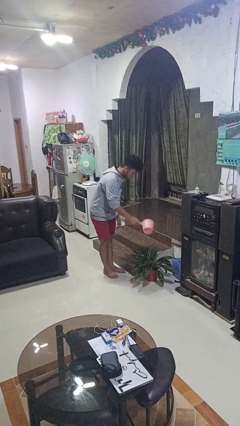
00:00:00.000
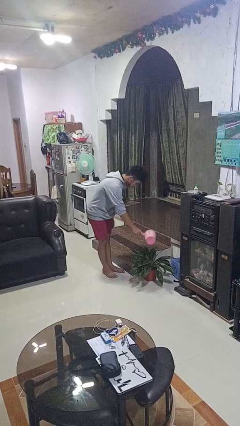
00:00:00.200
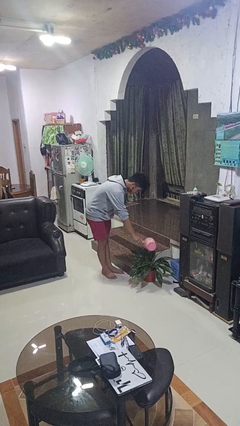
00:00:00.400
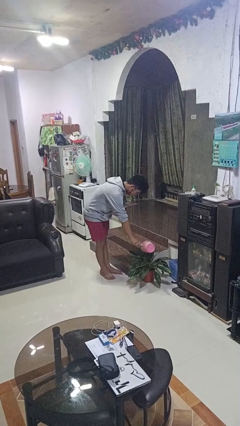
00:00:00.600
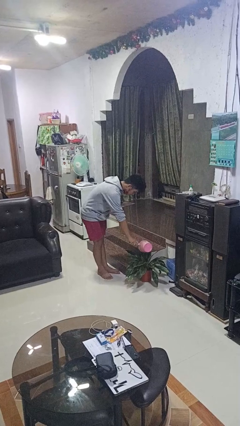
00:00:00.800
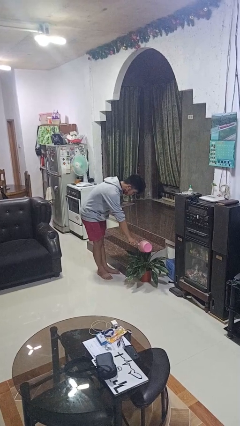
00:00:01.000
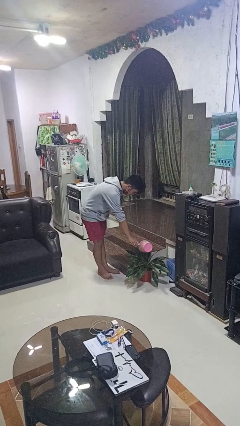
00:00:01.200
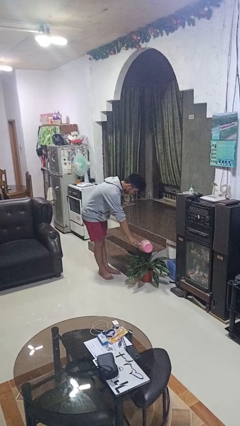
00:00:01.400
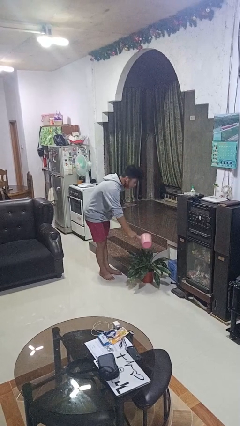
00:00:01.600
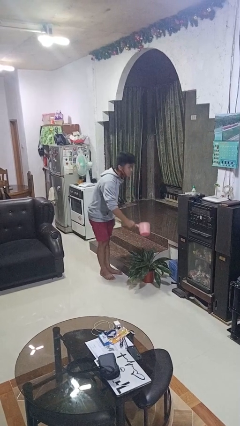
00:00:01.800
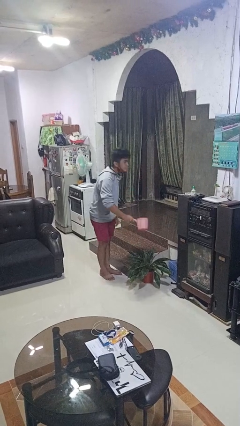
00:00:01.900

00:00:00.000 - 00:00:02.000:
person waters houseplant

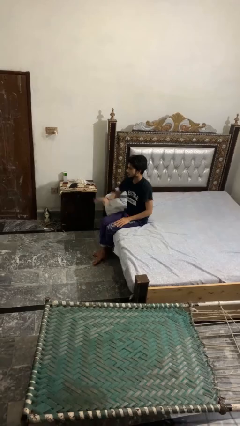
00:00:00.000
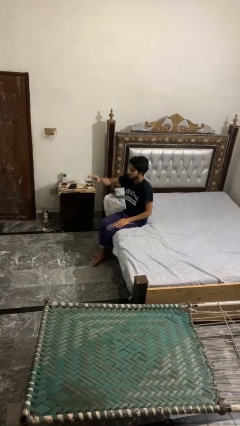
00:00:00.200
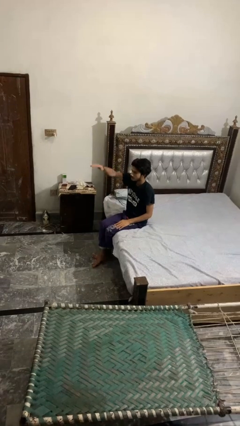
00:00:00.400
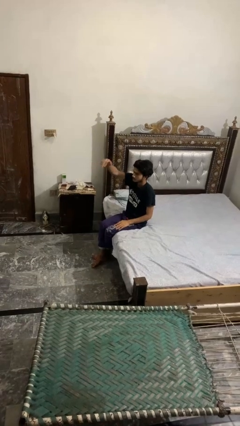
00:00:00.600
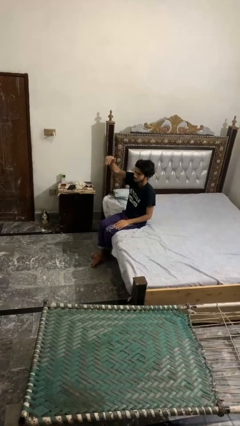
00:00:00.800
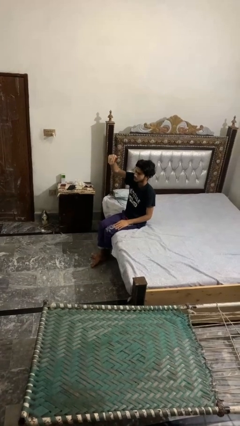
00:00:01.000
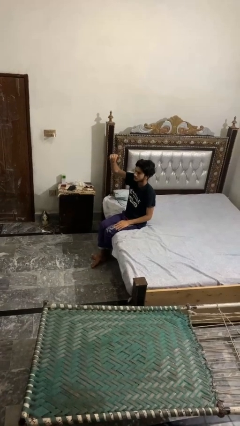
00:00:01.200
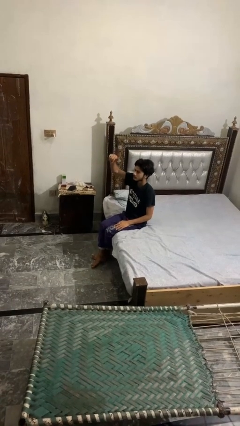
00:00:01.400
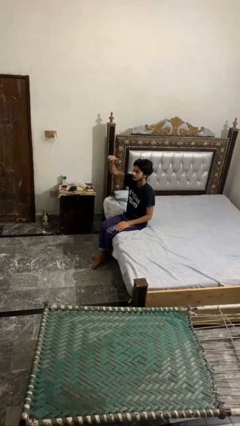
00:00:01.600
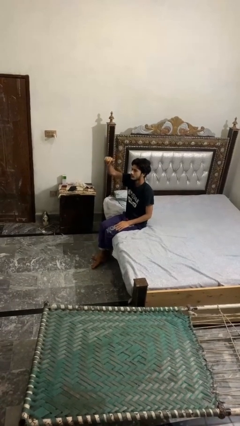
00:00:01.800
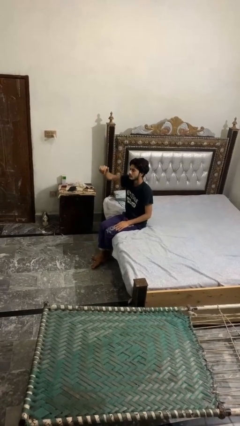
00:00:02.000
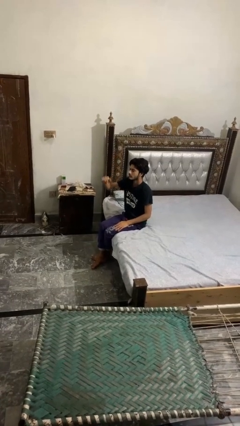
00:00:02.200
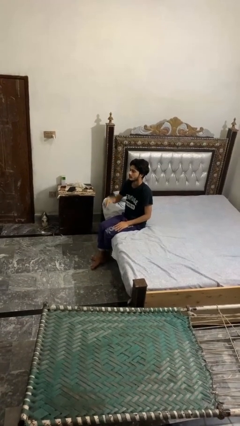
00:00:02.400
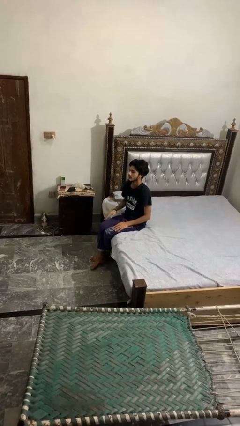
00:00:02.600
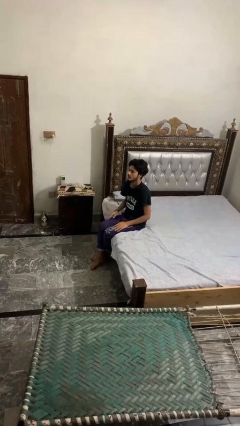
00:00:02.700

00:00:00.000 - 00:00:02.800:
person gestures come here

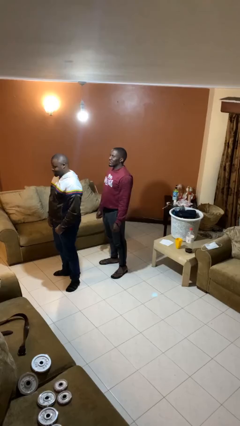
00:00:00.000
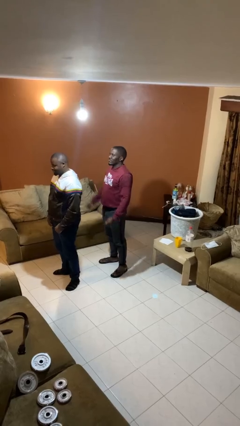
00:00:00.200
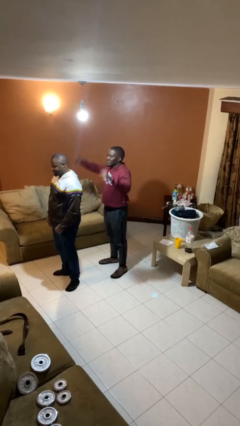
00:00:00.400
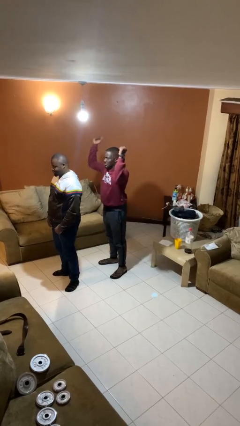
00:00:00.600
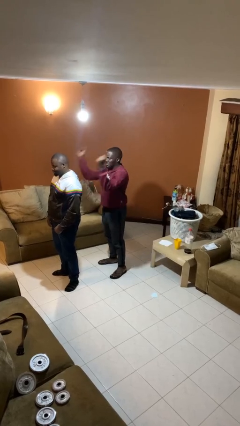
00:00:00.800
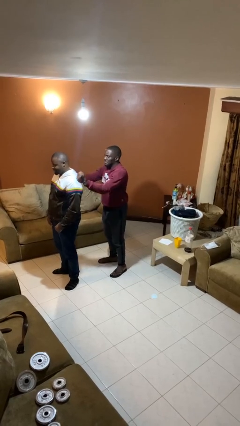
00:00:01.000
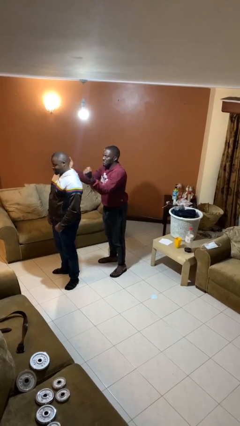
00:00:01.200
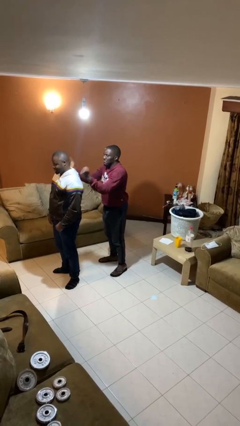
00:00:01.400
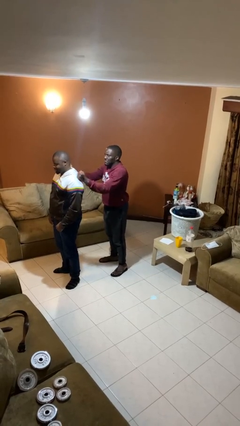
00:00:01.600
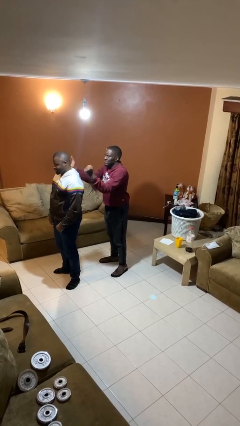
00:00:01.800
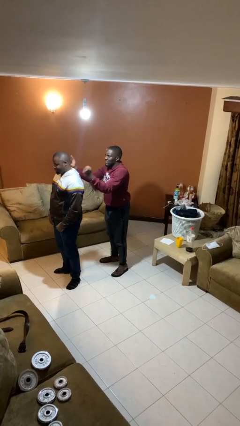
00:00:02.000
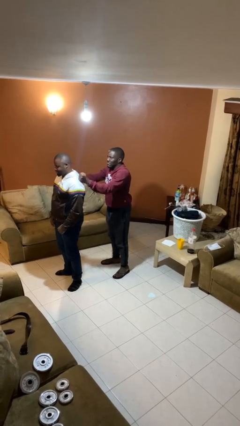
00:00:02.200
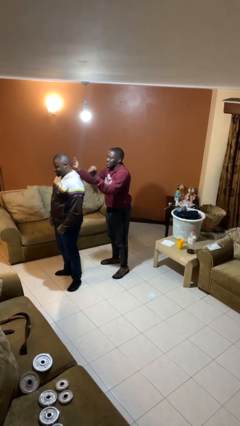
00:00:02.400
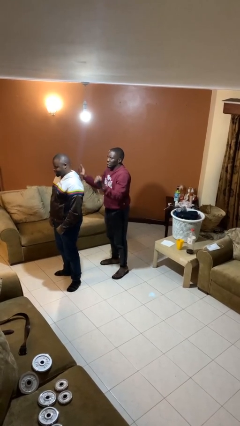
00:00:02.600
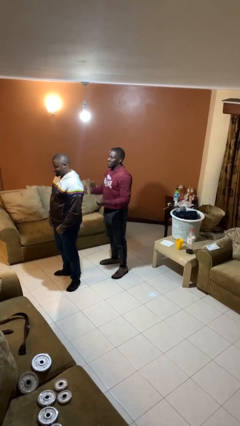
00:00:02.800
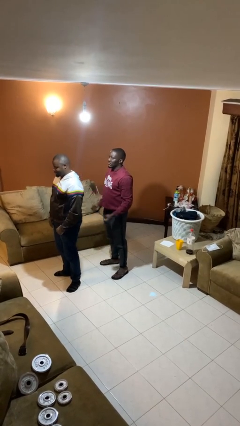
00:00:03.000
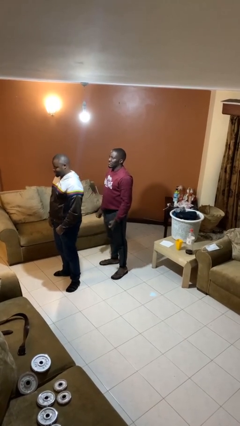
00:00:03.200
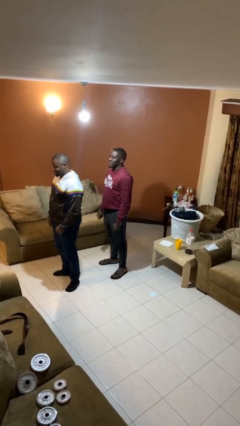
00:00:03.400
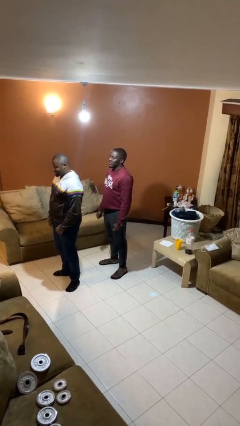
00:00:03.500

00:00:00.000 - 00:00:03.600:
person pounds shoulders of person

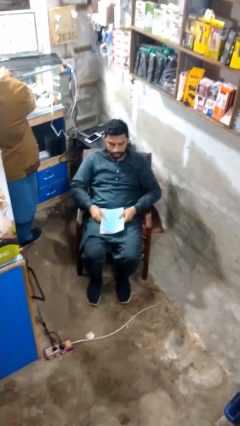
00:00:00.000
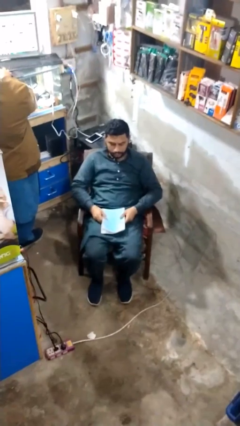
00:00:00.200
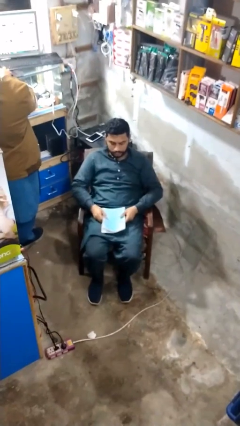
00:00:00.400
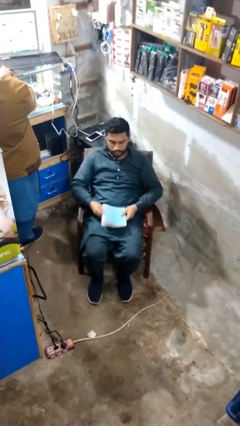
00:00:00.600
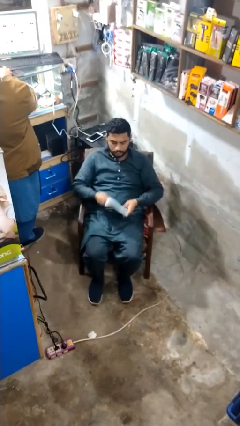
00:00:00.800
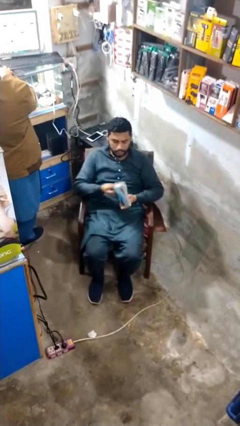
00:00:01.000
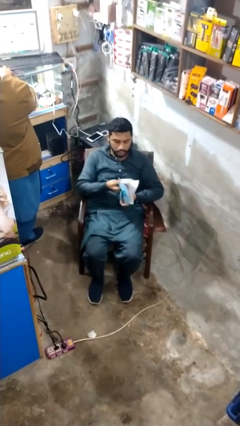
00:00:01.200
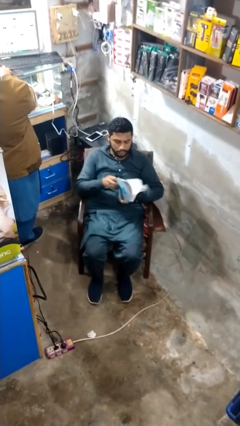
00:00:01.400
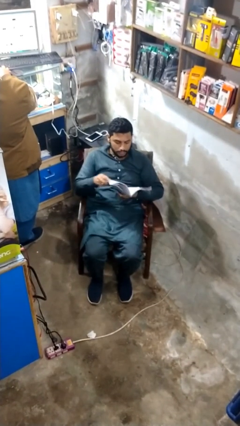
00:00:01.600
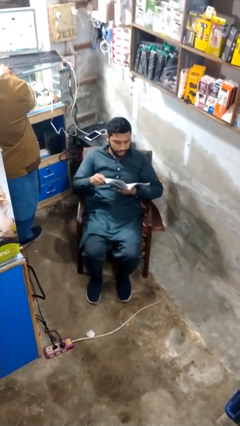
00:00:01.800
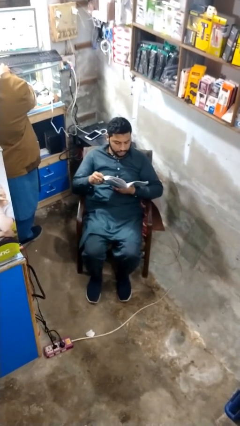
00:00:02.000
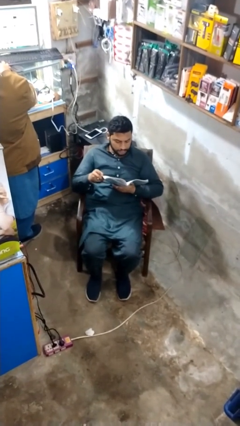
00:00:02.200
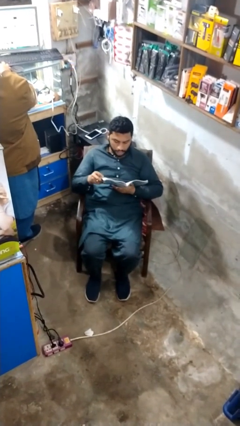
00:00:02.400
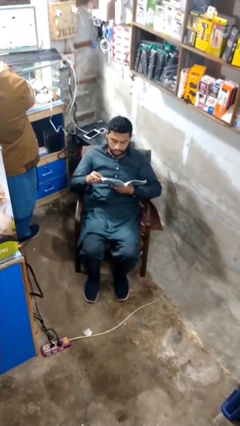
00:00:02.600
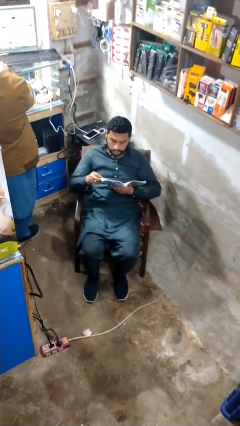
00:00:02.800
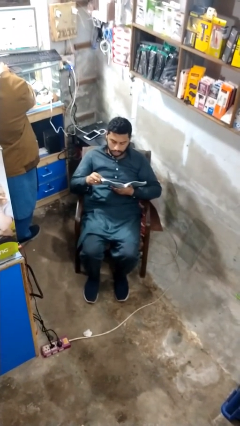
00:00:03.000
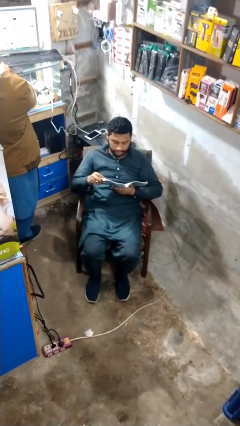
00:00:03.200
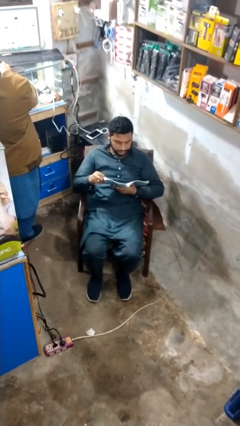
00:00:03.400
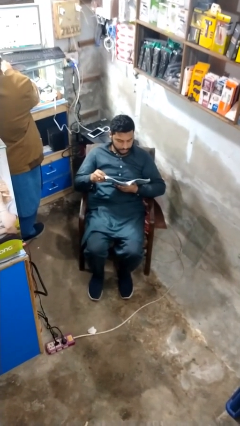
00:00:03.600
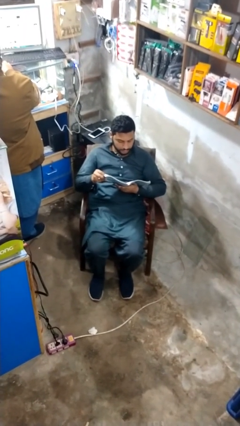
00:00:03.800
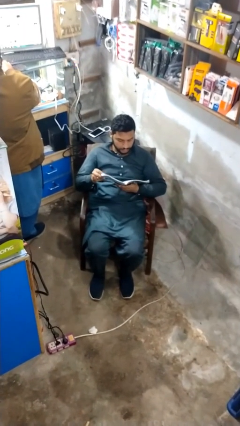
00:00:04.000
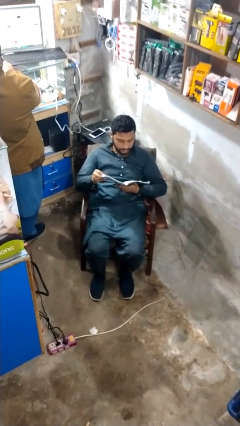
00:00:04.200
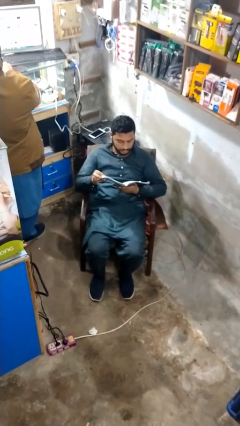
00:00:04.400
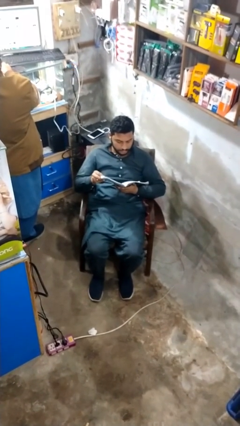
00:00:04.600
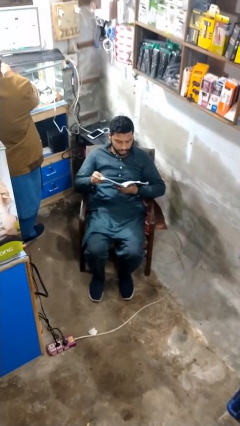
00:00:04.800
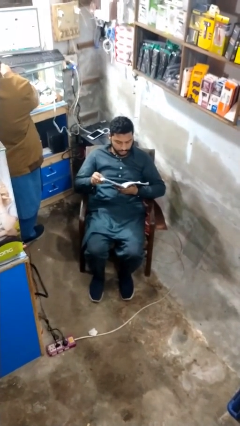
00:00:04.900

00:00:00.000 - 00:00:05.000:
person reads document

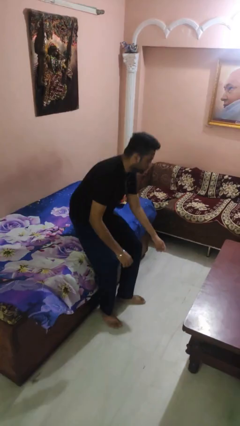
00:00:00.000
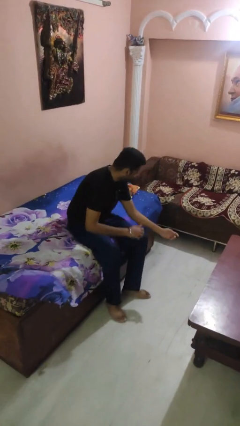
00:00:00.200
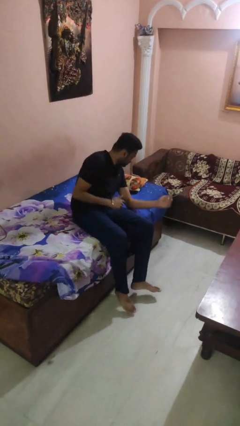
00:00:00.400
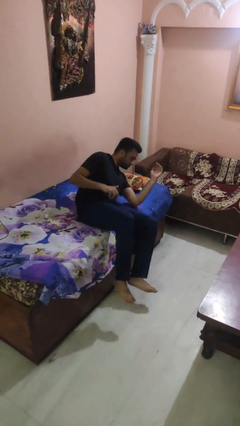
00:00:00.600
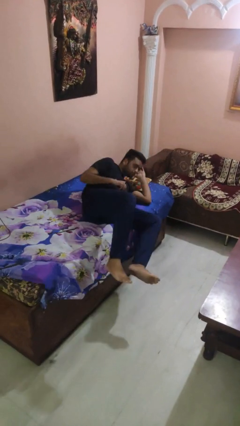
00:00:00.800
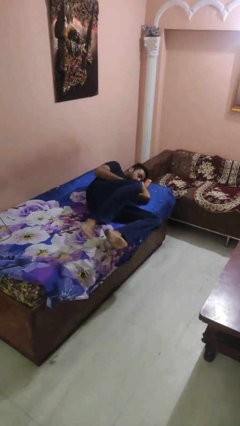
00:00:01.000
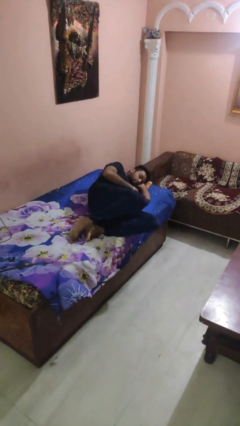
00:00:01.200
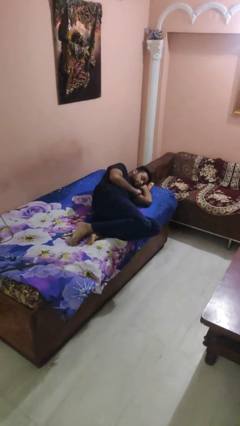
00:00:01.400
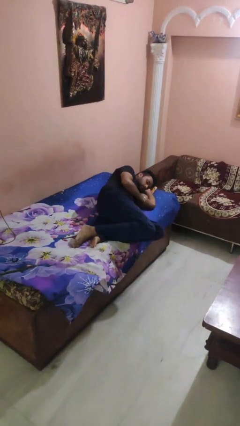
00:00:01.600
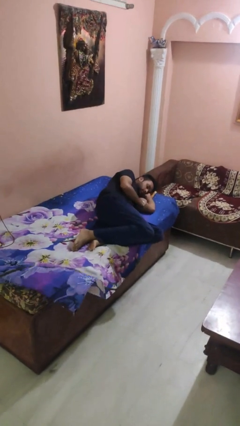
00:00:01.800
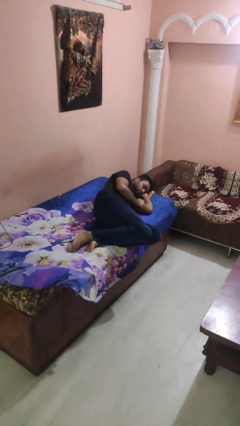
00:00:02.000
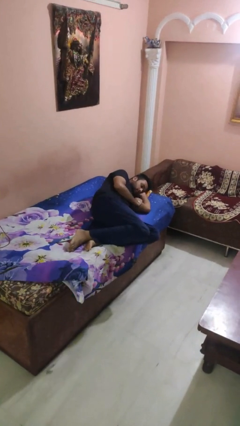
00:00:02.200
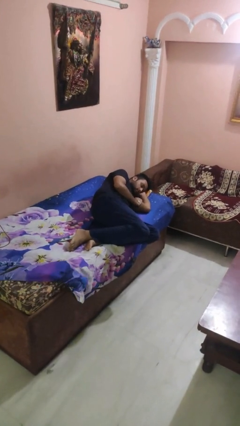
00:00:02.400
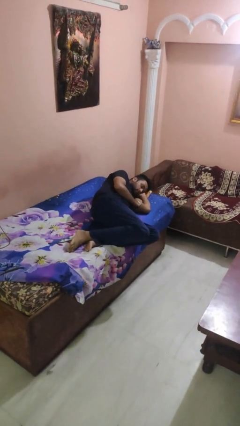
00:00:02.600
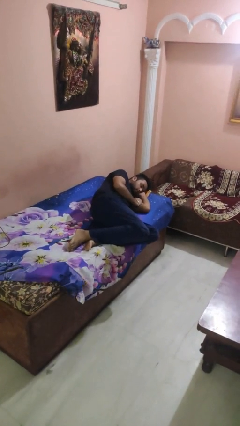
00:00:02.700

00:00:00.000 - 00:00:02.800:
person lies down on bed

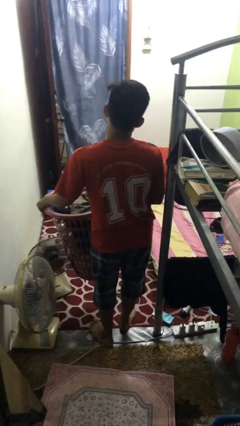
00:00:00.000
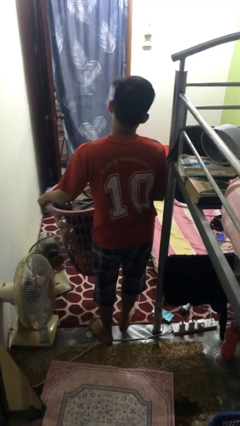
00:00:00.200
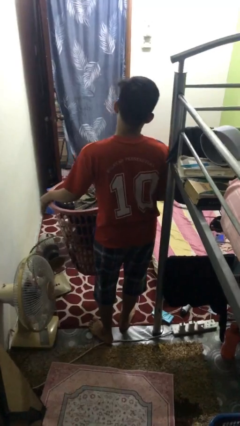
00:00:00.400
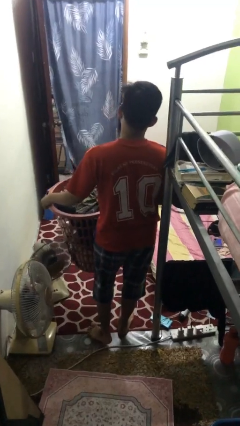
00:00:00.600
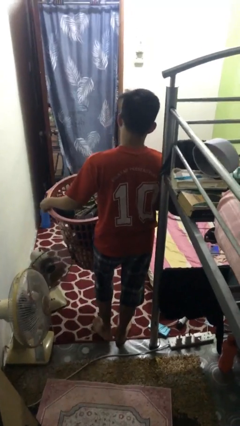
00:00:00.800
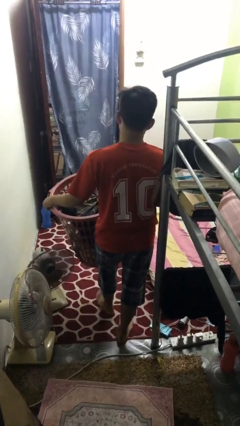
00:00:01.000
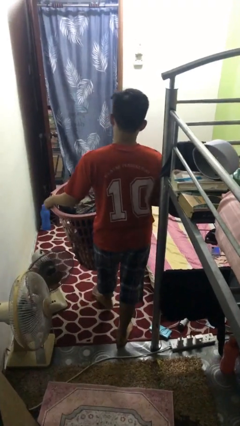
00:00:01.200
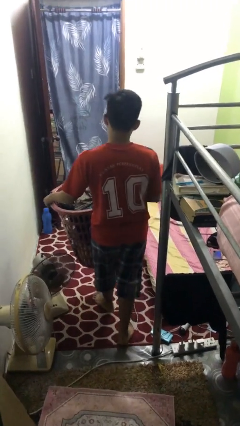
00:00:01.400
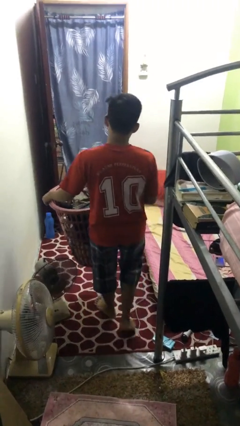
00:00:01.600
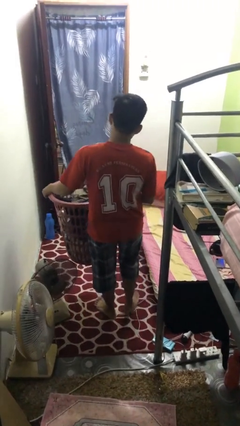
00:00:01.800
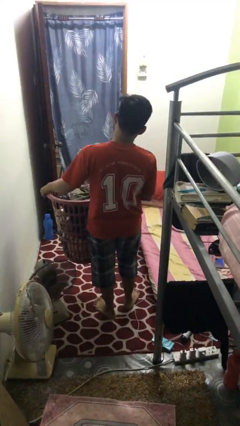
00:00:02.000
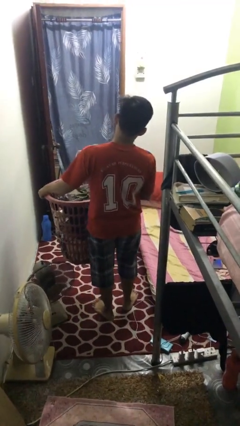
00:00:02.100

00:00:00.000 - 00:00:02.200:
person carries laundry basket
